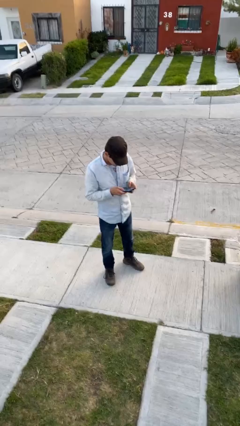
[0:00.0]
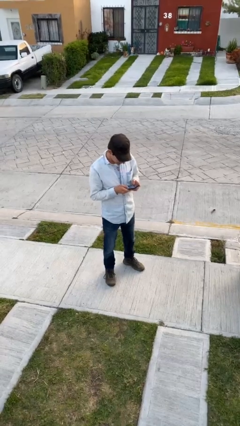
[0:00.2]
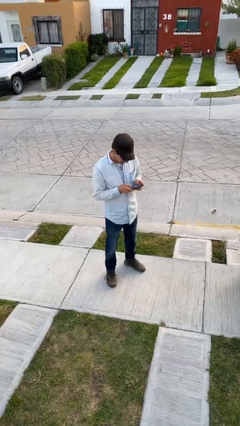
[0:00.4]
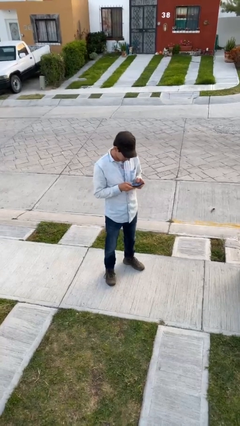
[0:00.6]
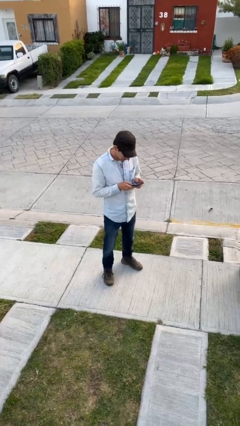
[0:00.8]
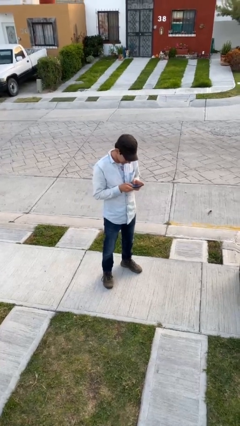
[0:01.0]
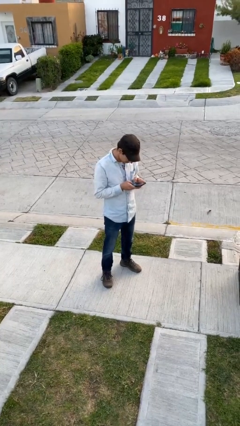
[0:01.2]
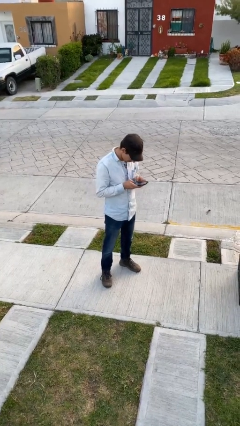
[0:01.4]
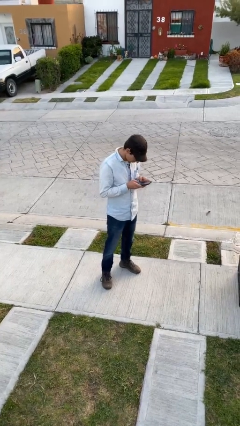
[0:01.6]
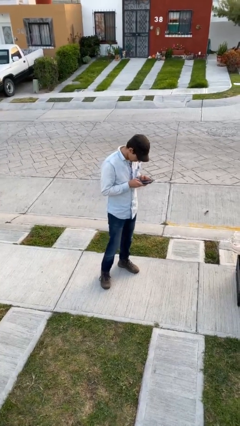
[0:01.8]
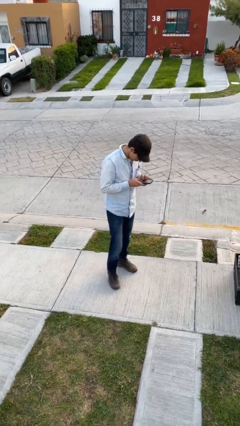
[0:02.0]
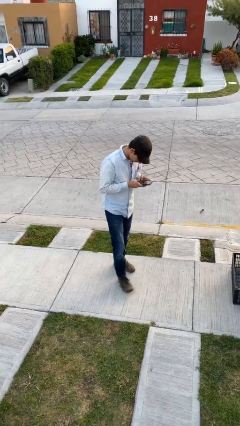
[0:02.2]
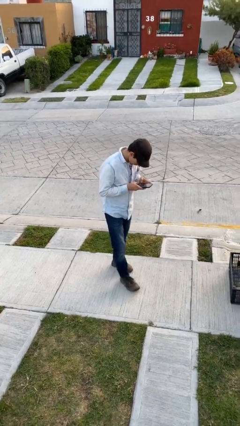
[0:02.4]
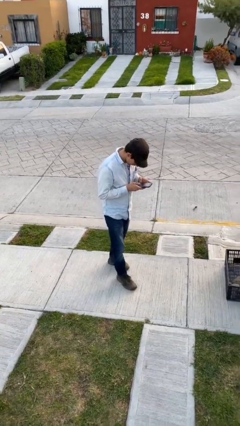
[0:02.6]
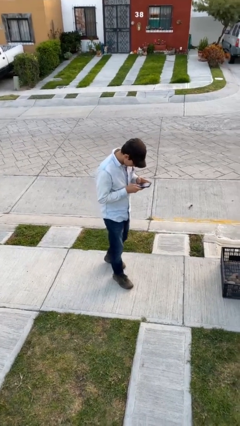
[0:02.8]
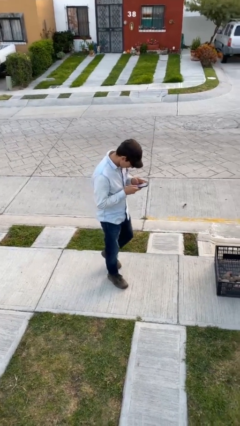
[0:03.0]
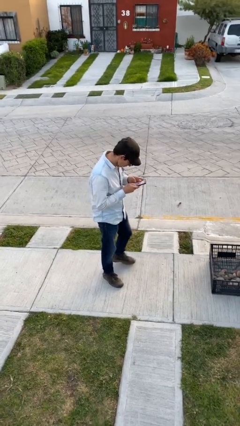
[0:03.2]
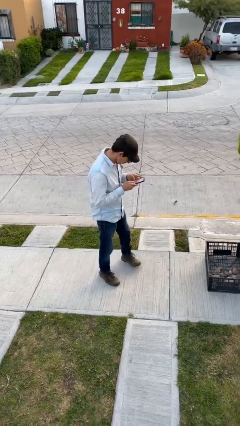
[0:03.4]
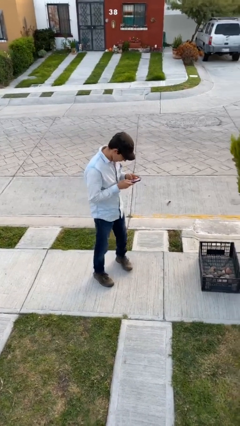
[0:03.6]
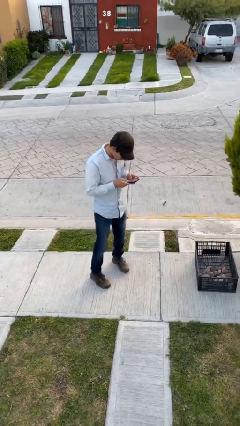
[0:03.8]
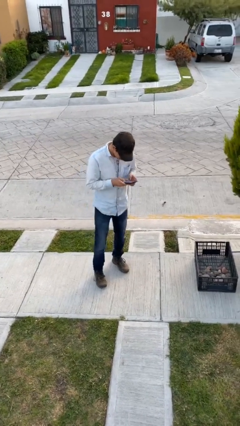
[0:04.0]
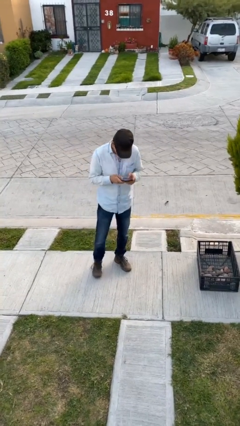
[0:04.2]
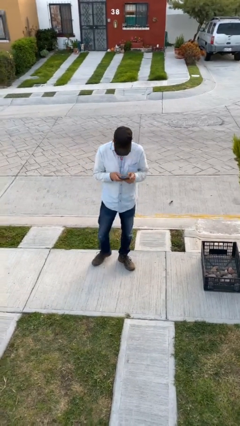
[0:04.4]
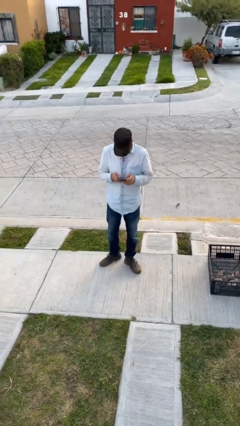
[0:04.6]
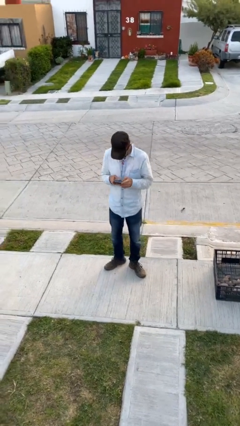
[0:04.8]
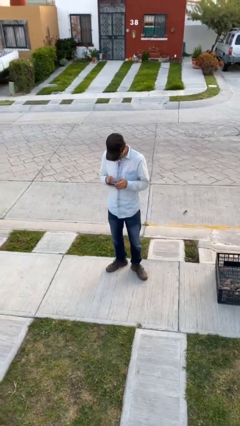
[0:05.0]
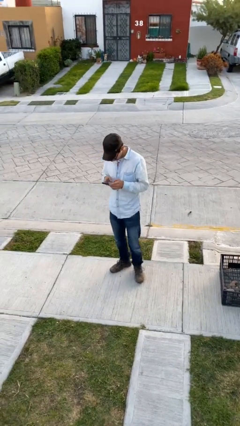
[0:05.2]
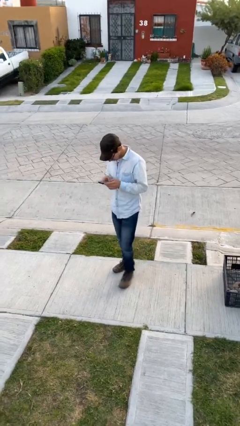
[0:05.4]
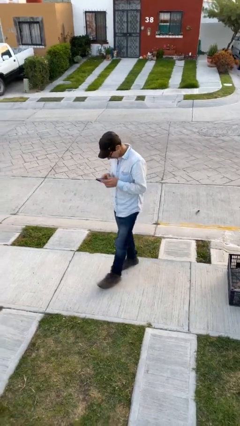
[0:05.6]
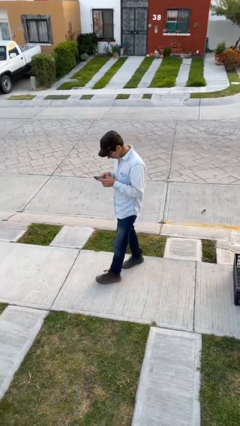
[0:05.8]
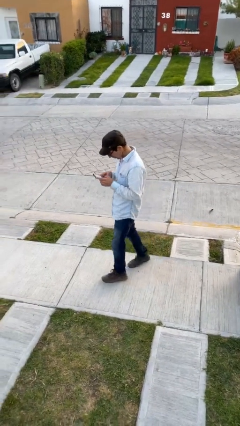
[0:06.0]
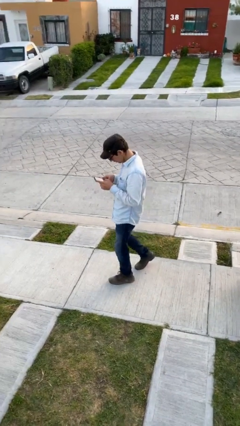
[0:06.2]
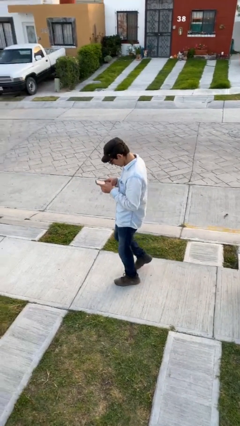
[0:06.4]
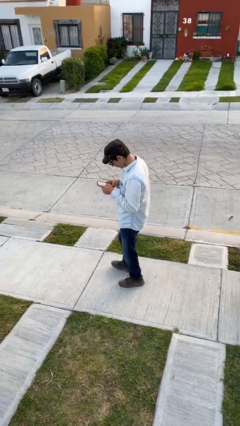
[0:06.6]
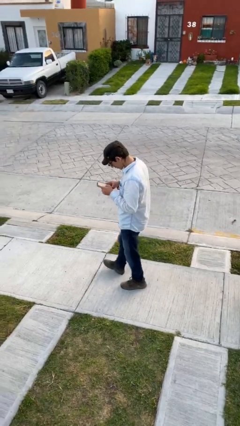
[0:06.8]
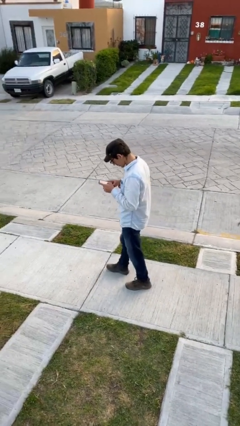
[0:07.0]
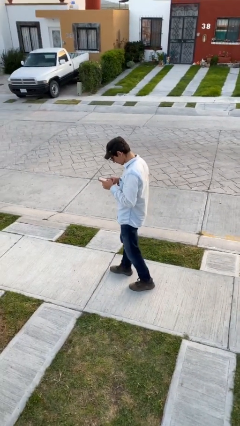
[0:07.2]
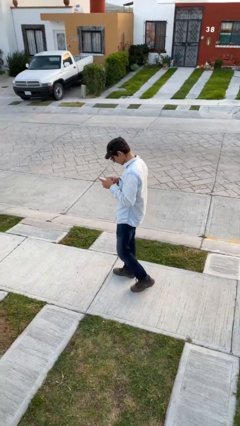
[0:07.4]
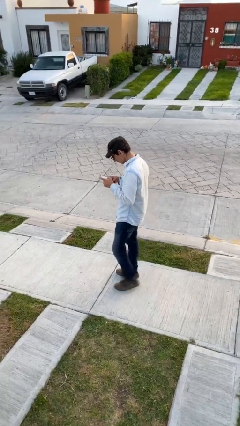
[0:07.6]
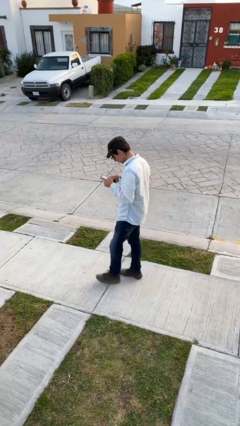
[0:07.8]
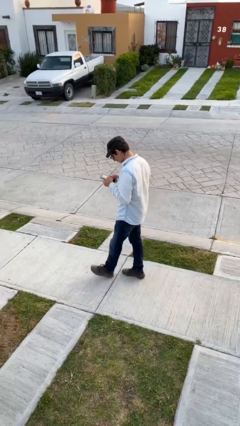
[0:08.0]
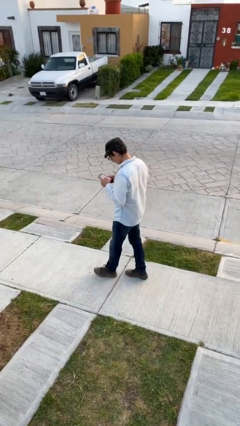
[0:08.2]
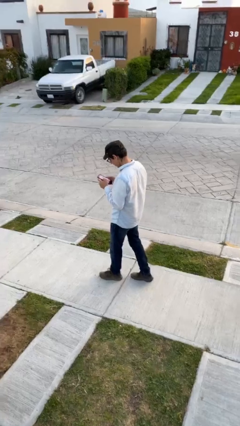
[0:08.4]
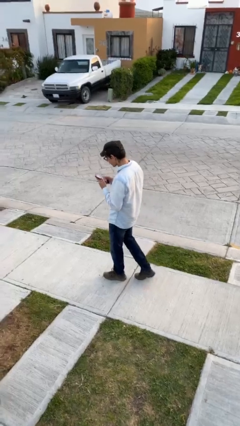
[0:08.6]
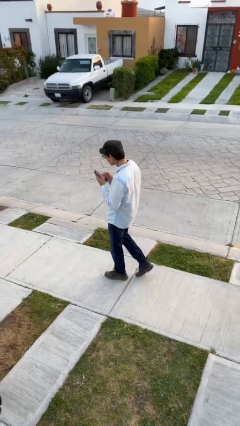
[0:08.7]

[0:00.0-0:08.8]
person texts on phone

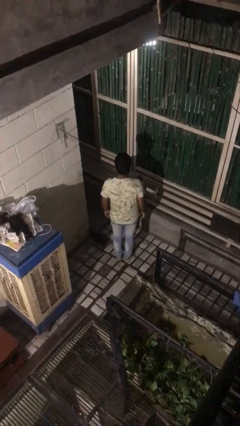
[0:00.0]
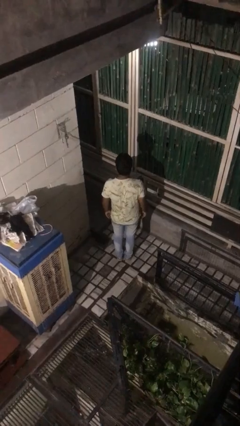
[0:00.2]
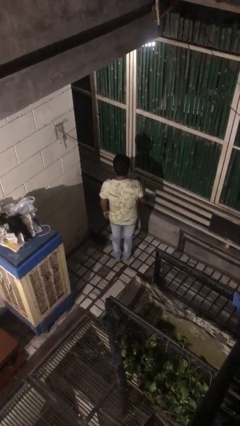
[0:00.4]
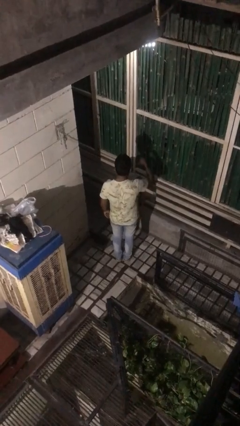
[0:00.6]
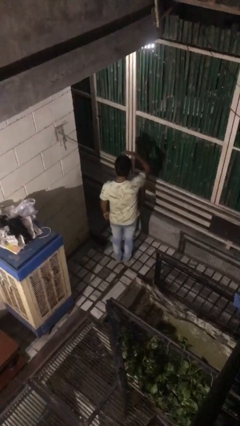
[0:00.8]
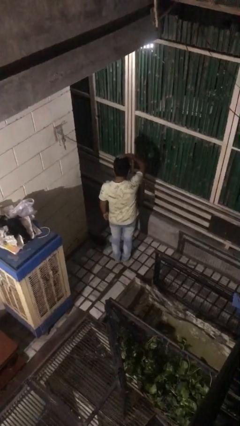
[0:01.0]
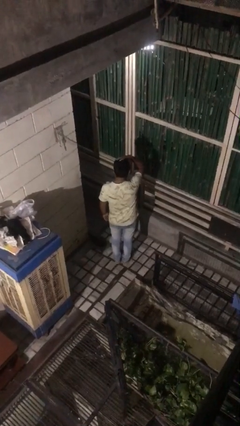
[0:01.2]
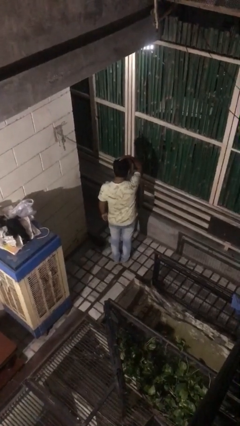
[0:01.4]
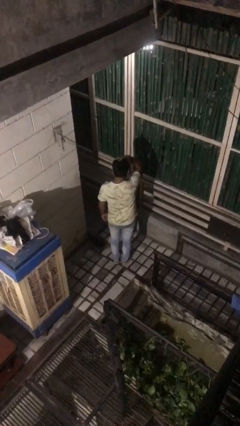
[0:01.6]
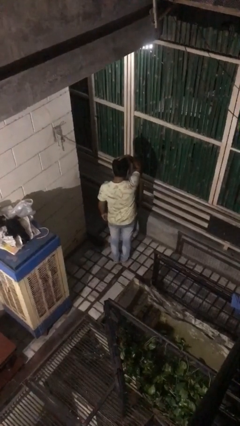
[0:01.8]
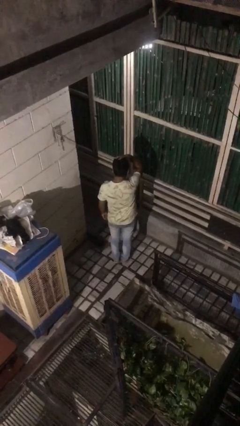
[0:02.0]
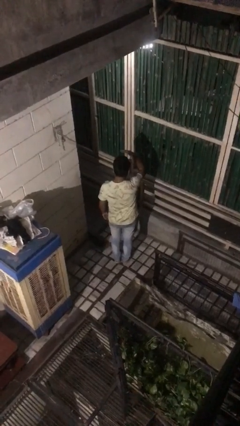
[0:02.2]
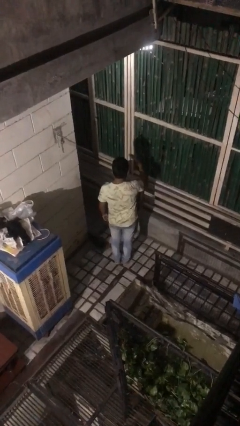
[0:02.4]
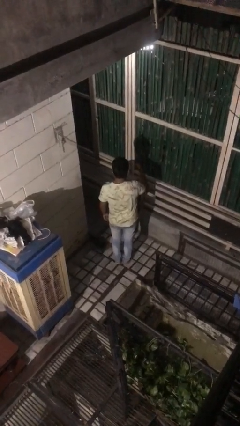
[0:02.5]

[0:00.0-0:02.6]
person pats head

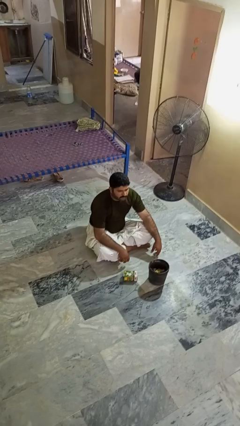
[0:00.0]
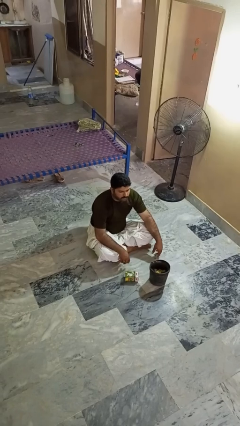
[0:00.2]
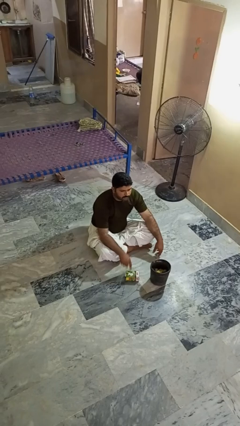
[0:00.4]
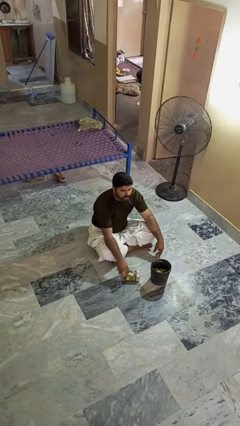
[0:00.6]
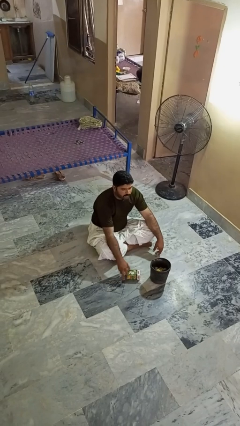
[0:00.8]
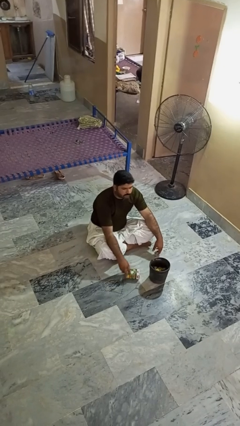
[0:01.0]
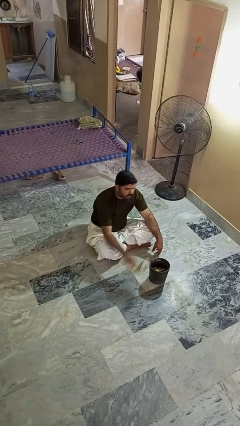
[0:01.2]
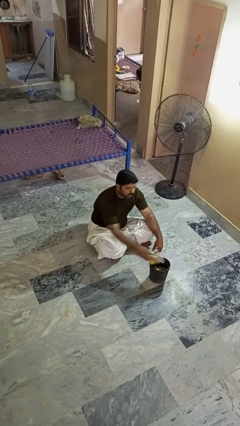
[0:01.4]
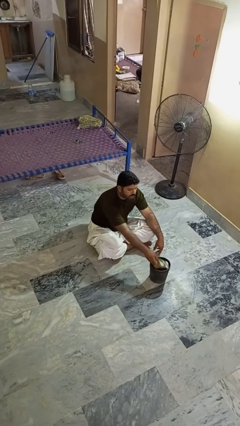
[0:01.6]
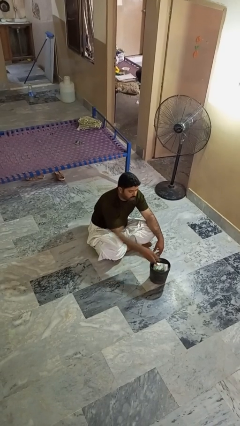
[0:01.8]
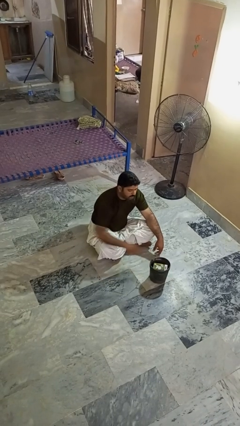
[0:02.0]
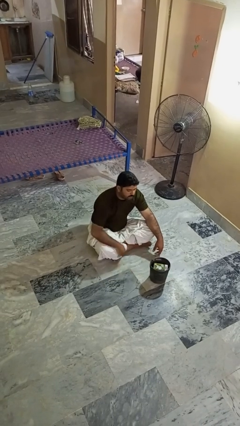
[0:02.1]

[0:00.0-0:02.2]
person puts object into basket

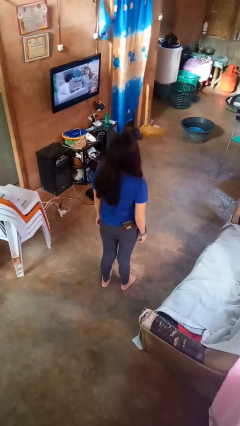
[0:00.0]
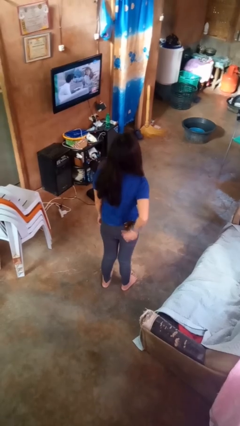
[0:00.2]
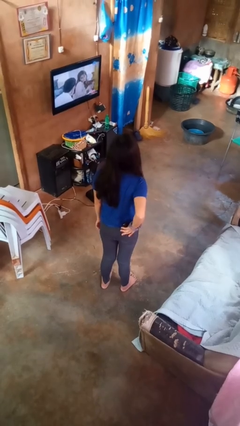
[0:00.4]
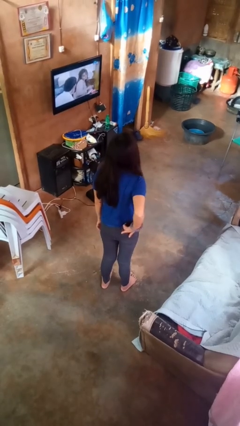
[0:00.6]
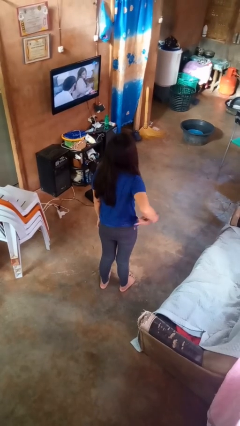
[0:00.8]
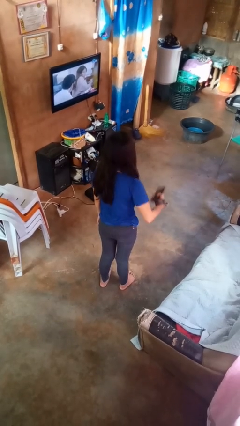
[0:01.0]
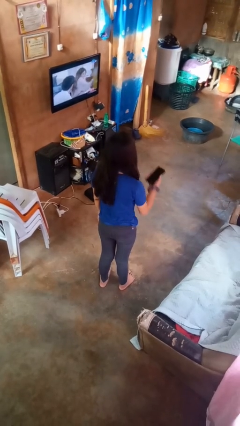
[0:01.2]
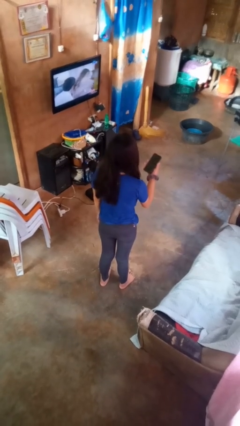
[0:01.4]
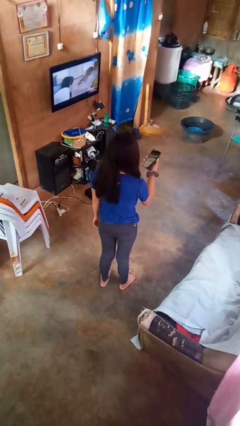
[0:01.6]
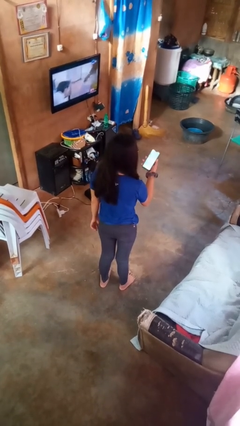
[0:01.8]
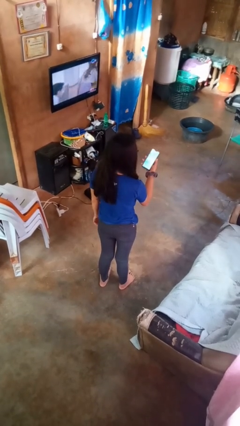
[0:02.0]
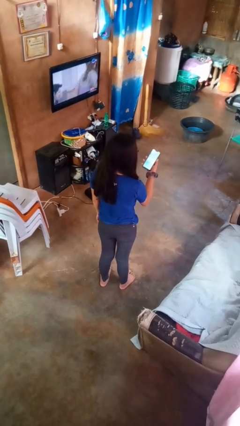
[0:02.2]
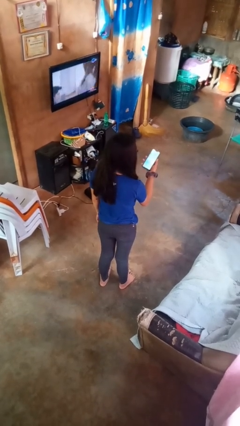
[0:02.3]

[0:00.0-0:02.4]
person takes phone from pocket

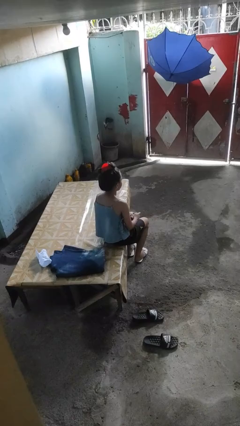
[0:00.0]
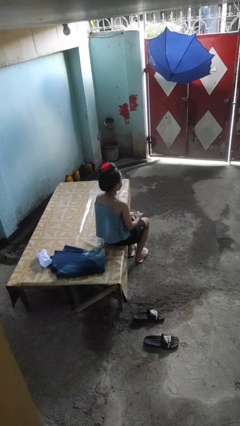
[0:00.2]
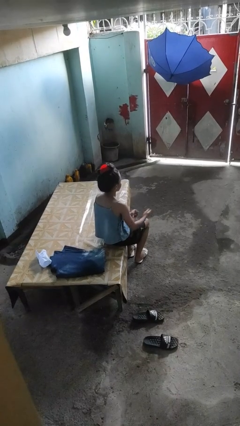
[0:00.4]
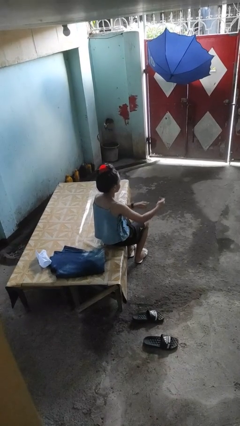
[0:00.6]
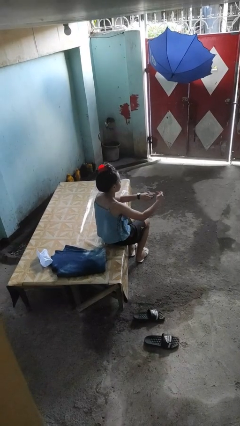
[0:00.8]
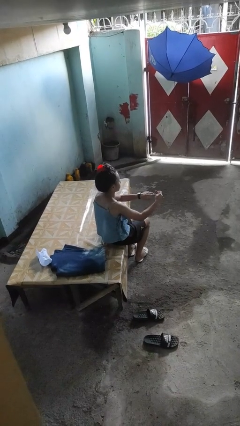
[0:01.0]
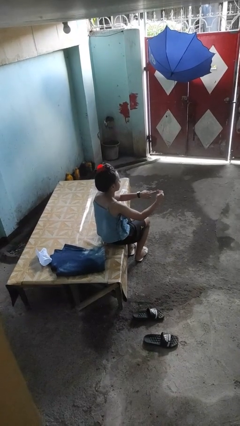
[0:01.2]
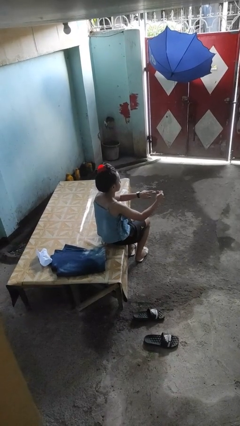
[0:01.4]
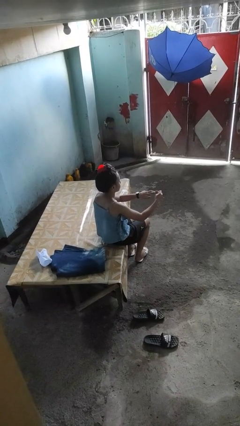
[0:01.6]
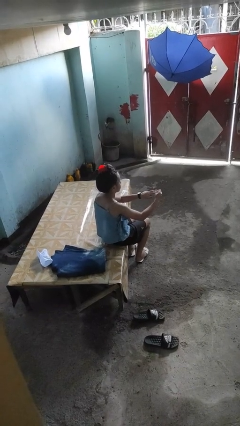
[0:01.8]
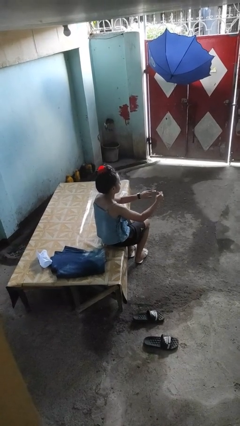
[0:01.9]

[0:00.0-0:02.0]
person clips fingernails
